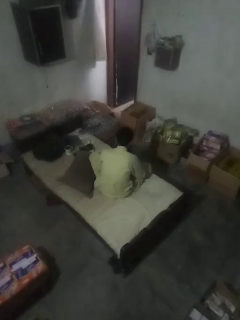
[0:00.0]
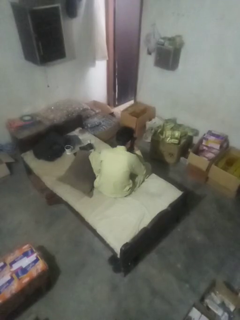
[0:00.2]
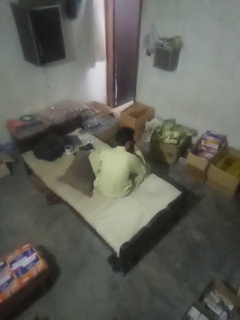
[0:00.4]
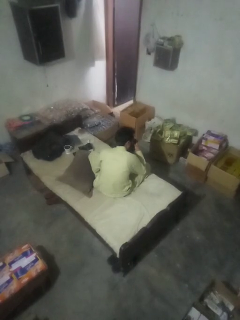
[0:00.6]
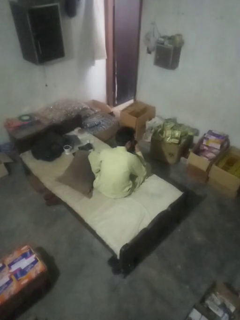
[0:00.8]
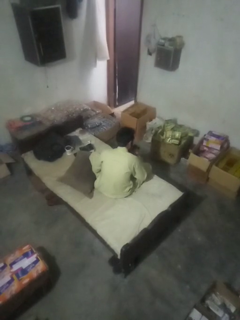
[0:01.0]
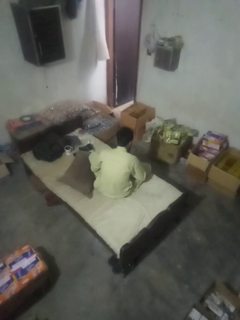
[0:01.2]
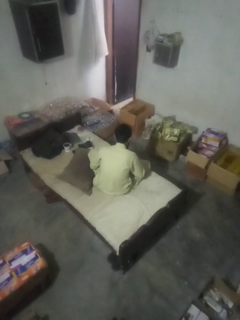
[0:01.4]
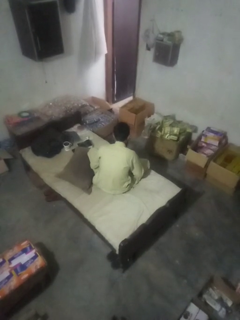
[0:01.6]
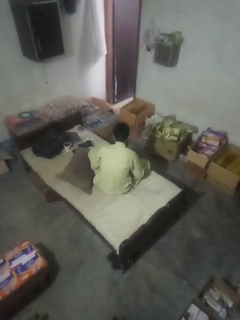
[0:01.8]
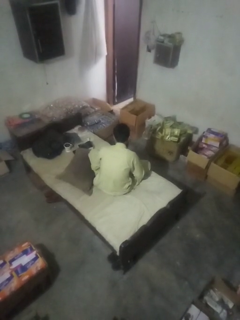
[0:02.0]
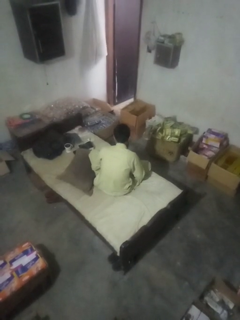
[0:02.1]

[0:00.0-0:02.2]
person blows nose

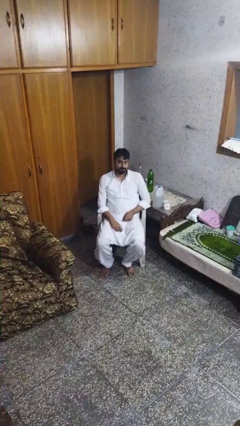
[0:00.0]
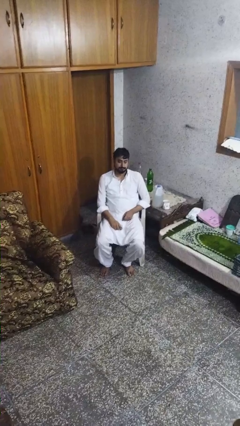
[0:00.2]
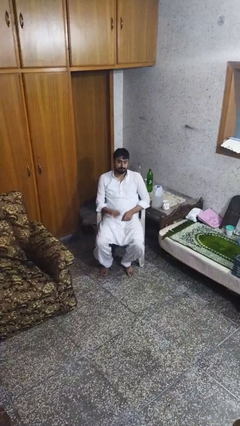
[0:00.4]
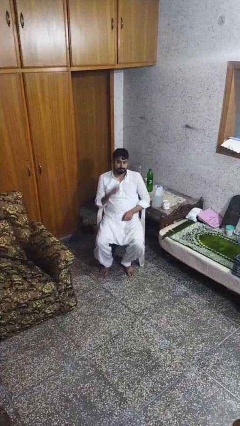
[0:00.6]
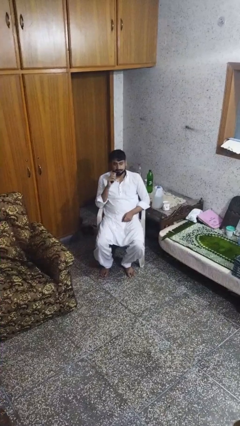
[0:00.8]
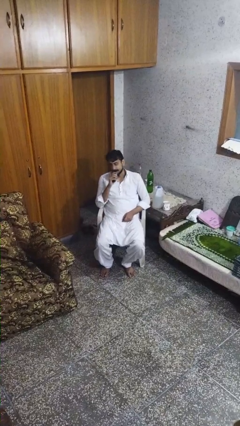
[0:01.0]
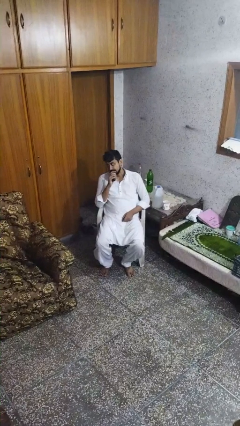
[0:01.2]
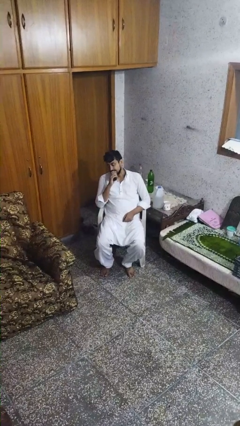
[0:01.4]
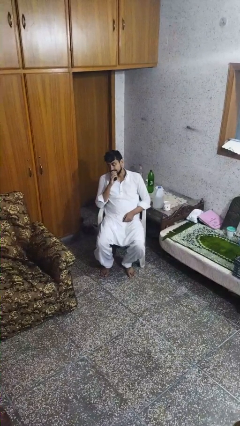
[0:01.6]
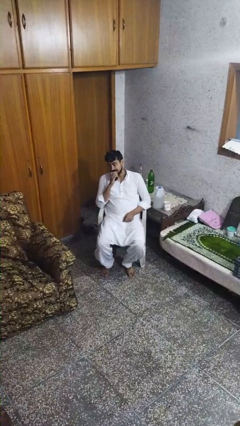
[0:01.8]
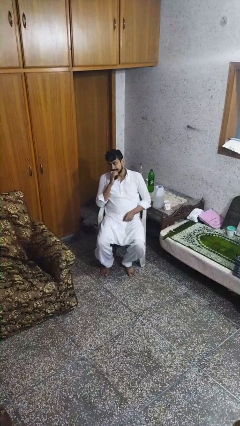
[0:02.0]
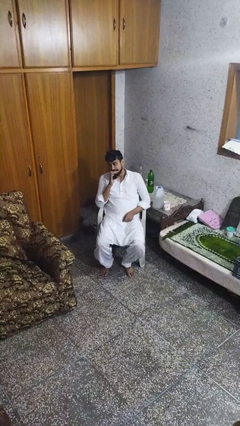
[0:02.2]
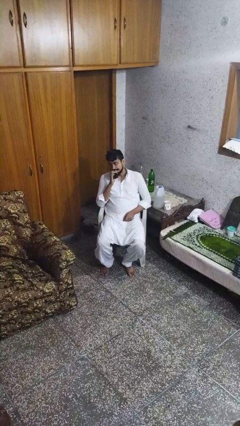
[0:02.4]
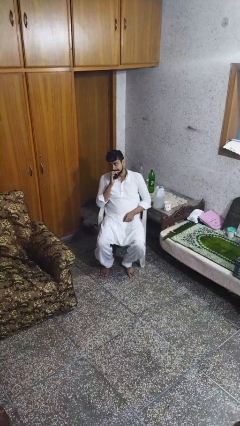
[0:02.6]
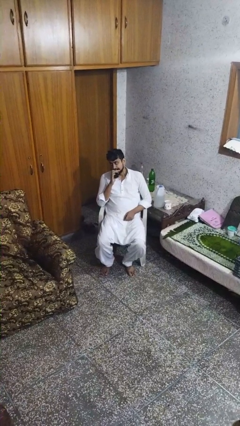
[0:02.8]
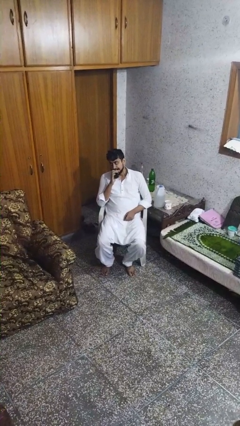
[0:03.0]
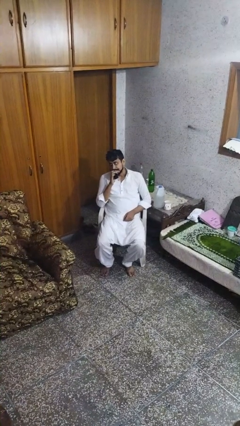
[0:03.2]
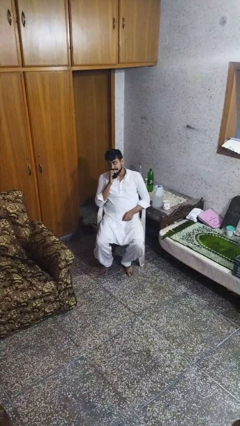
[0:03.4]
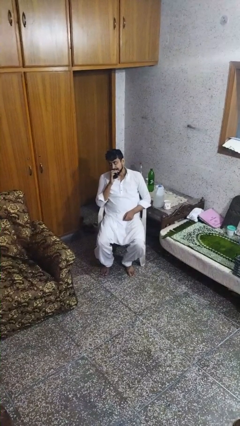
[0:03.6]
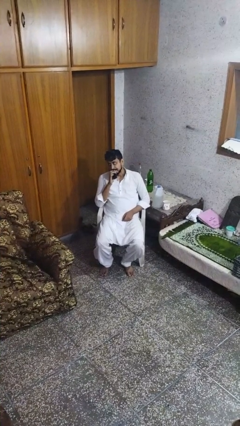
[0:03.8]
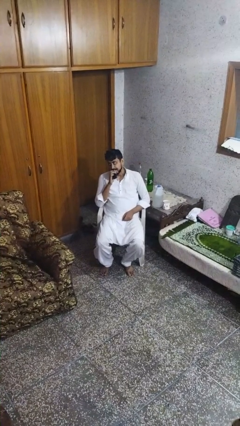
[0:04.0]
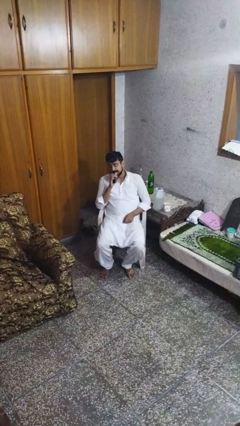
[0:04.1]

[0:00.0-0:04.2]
person vapes

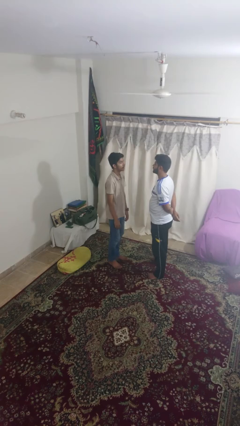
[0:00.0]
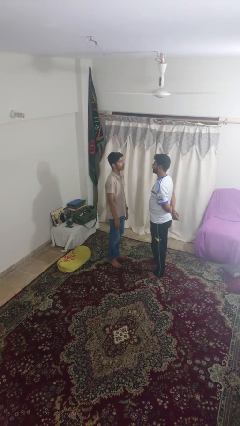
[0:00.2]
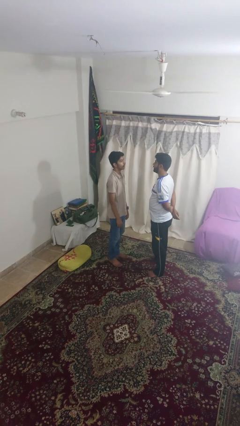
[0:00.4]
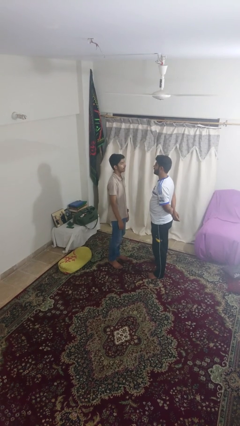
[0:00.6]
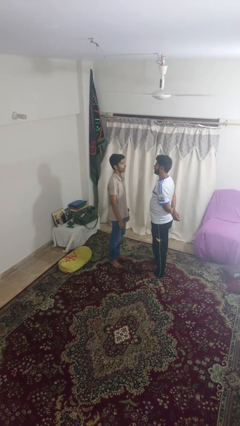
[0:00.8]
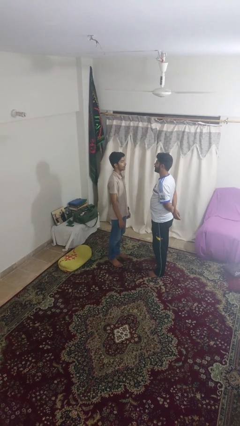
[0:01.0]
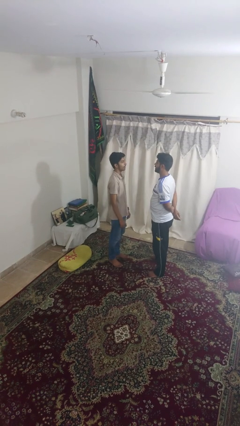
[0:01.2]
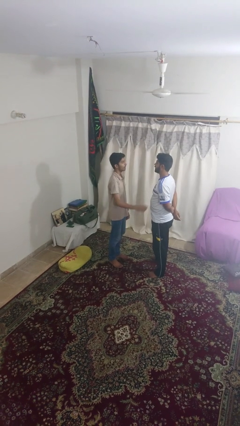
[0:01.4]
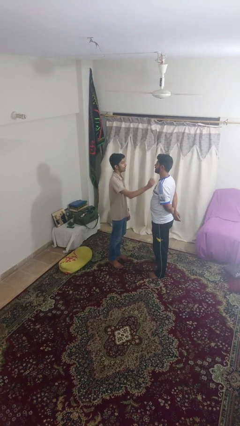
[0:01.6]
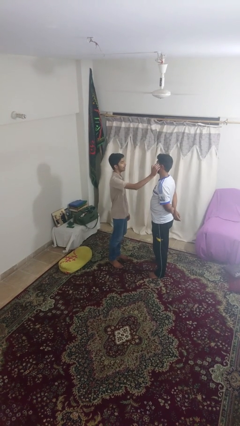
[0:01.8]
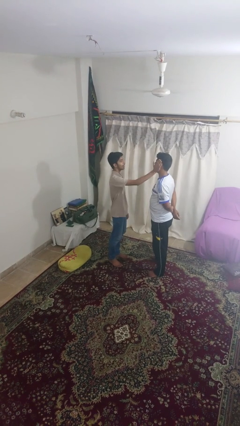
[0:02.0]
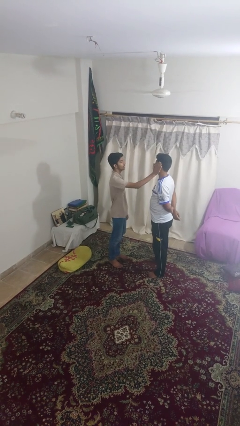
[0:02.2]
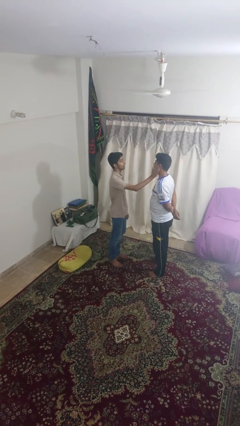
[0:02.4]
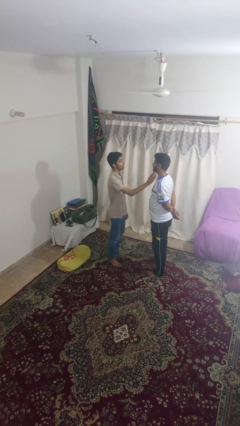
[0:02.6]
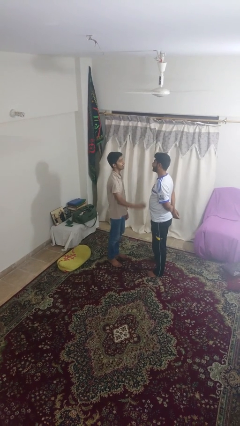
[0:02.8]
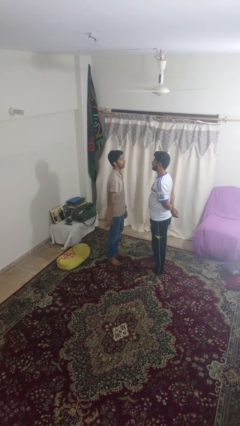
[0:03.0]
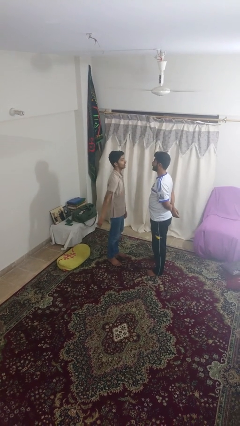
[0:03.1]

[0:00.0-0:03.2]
person touches face of person

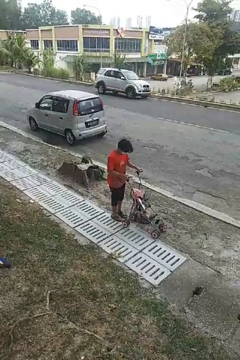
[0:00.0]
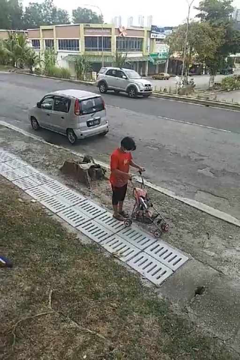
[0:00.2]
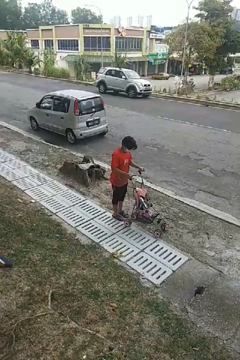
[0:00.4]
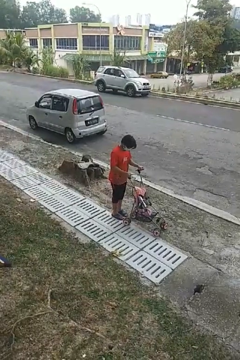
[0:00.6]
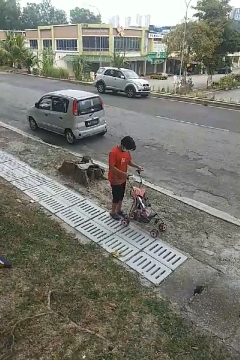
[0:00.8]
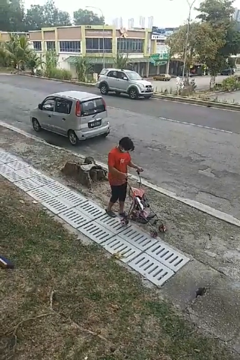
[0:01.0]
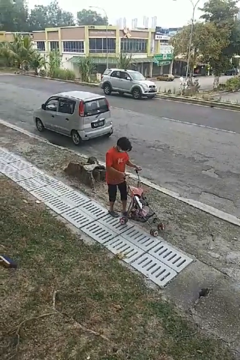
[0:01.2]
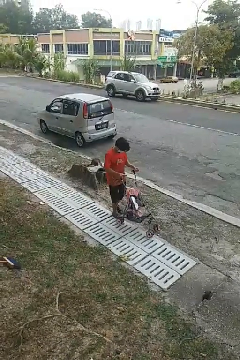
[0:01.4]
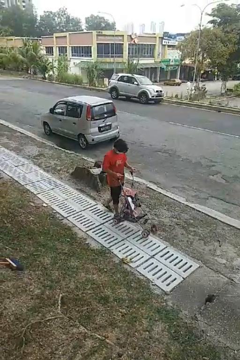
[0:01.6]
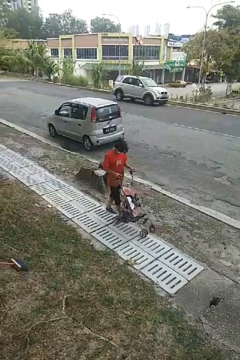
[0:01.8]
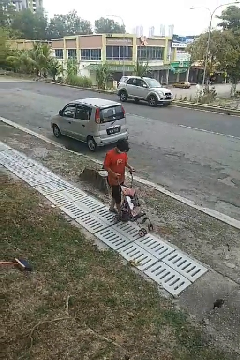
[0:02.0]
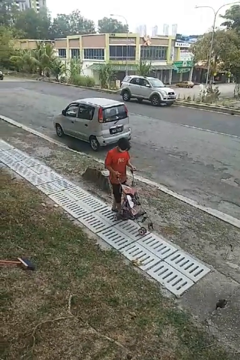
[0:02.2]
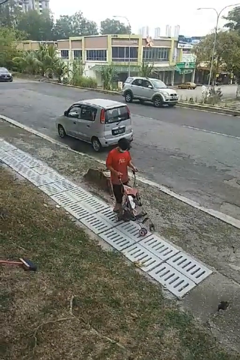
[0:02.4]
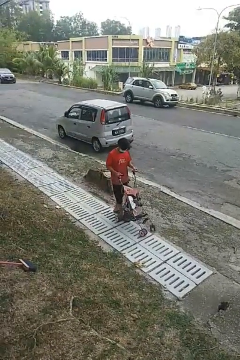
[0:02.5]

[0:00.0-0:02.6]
person pulls wheeled cart

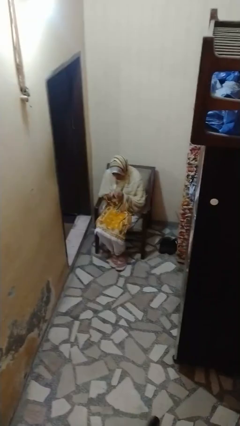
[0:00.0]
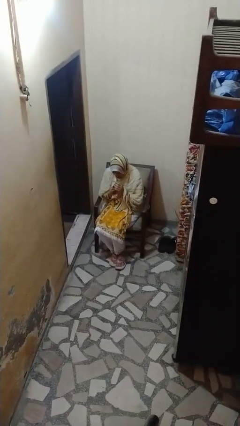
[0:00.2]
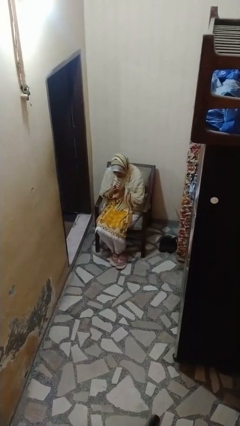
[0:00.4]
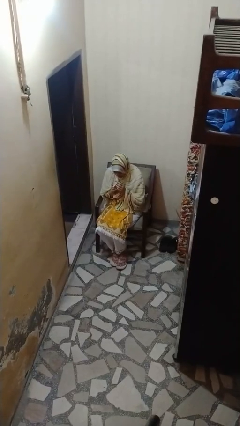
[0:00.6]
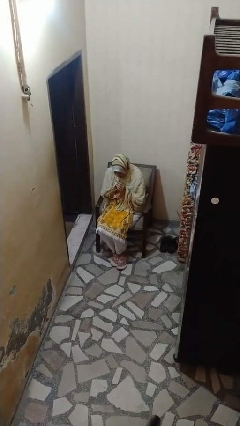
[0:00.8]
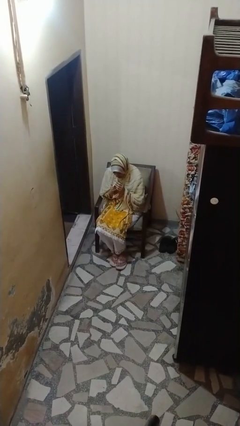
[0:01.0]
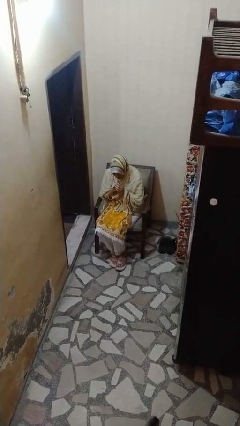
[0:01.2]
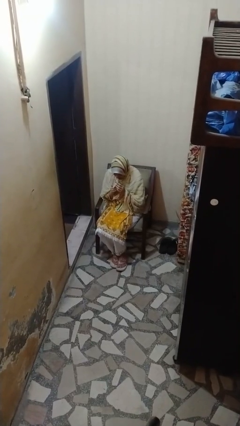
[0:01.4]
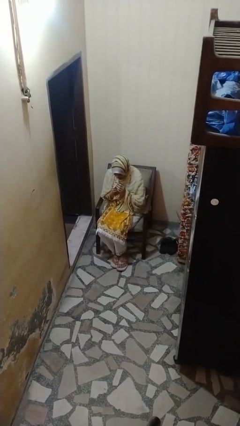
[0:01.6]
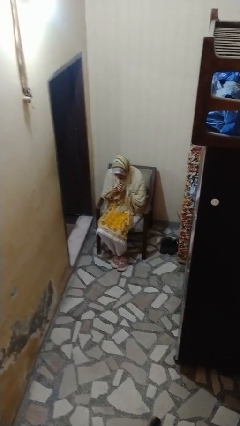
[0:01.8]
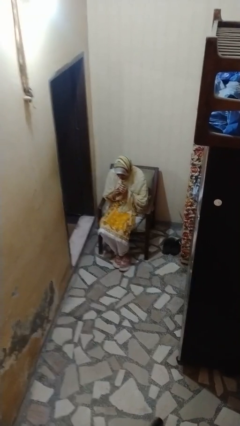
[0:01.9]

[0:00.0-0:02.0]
person eats banana

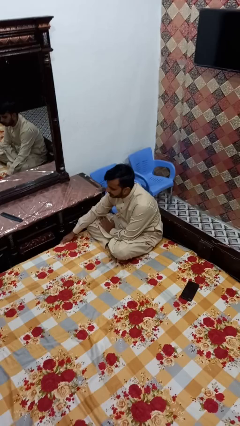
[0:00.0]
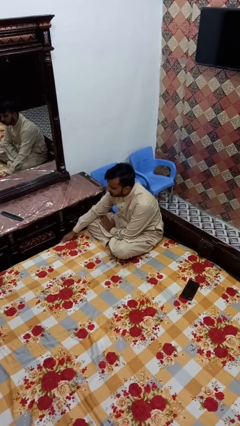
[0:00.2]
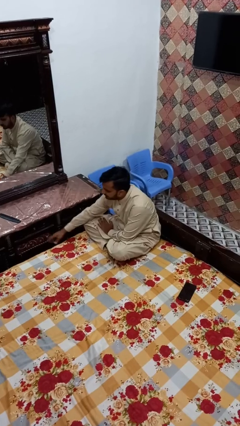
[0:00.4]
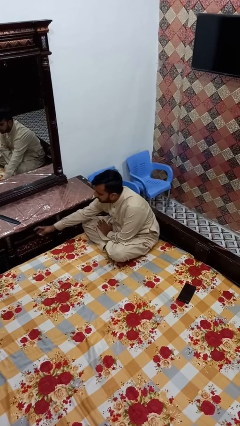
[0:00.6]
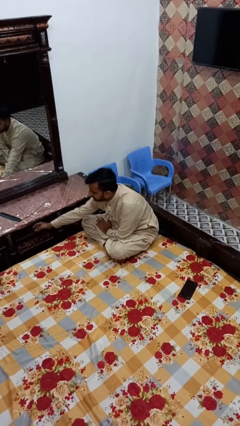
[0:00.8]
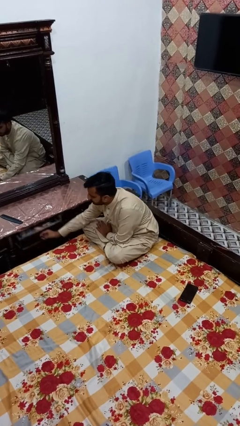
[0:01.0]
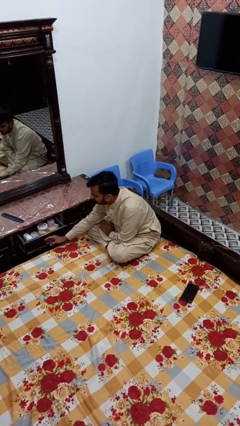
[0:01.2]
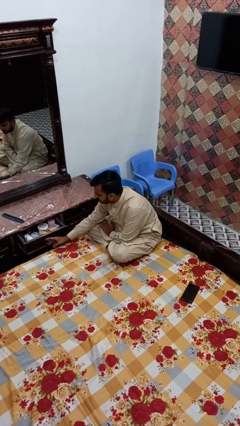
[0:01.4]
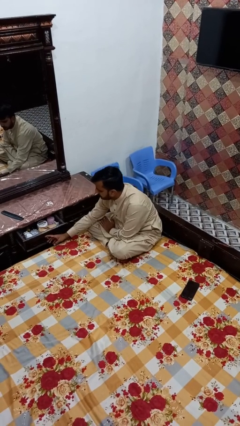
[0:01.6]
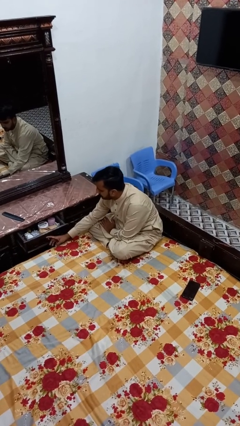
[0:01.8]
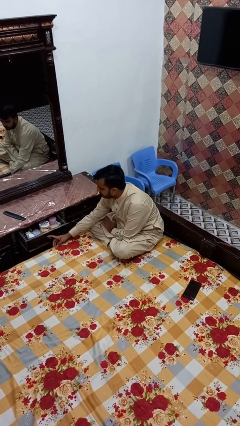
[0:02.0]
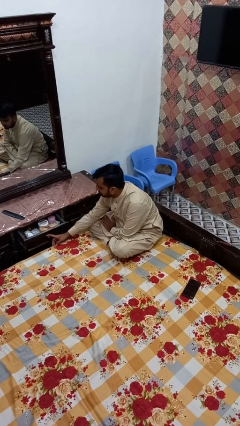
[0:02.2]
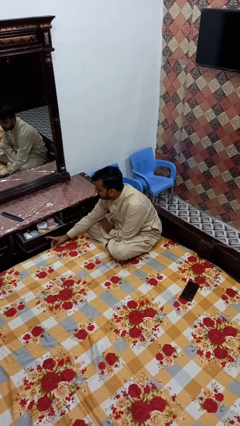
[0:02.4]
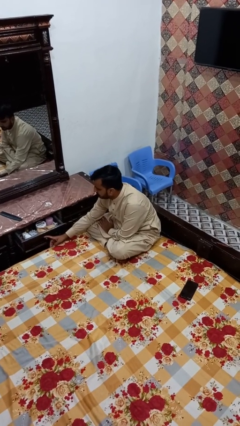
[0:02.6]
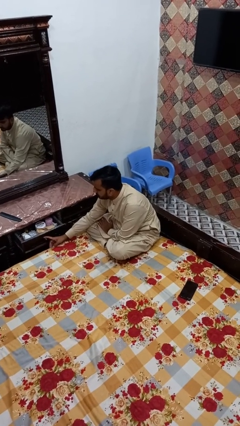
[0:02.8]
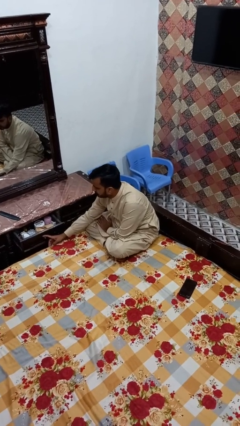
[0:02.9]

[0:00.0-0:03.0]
person opens dresser drawer

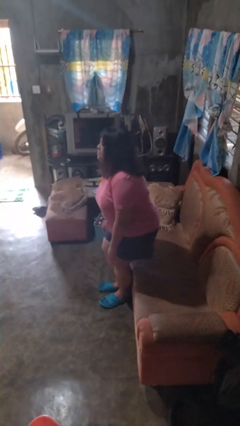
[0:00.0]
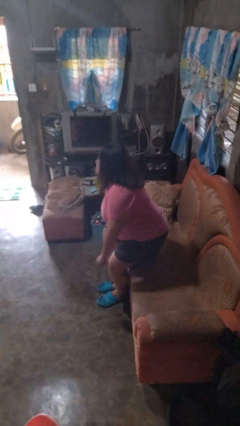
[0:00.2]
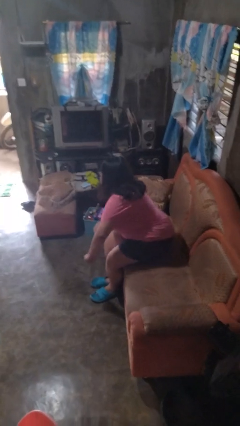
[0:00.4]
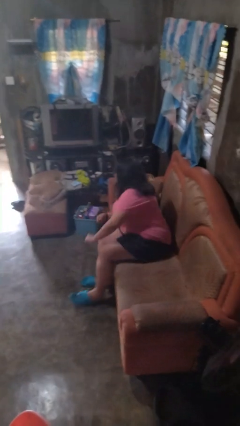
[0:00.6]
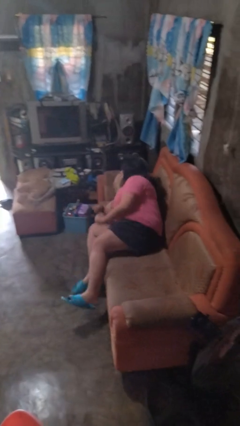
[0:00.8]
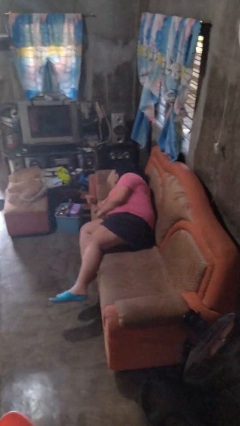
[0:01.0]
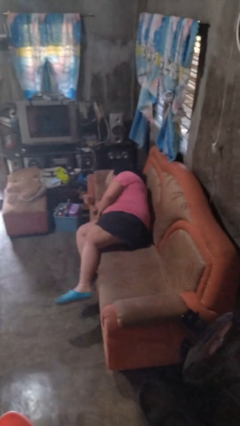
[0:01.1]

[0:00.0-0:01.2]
person lies down on couch
